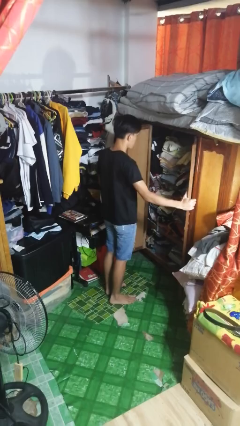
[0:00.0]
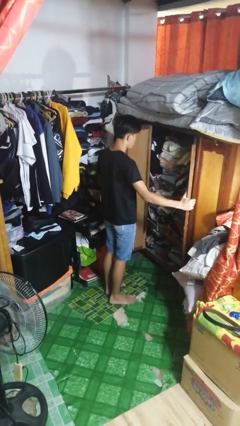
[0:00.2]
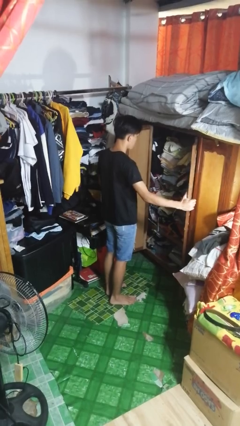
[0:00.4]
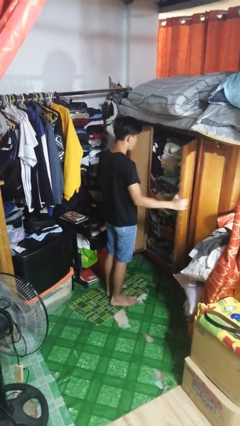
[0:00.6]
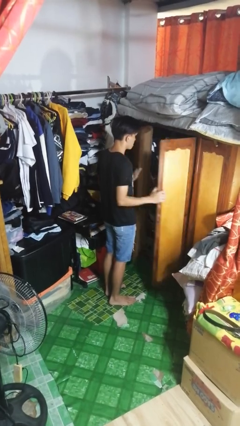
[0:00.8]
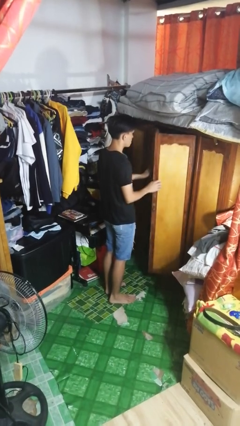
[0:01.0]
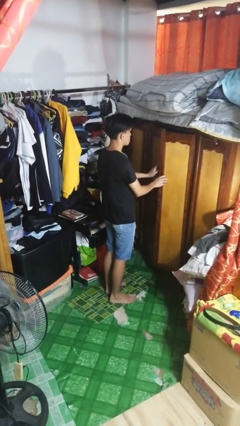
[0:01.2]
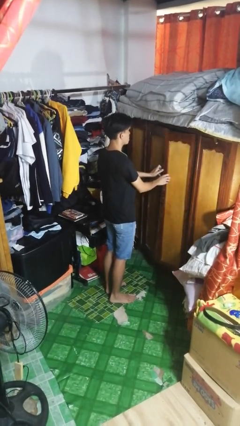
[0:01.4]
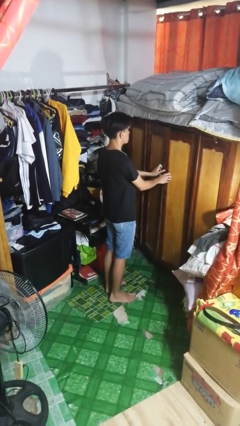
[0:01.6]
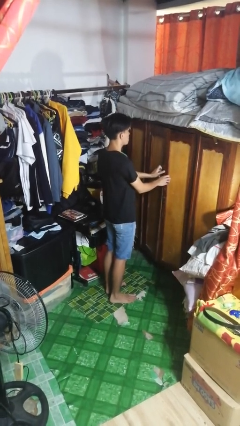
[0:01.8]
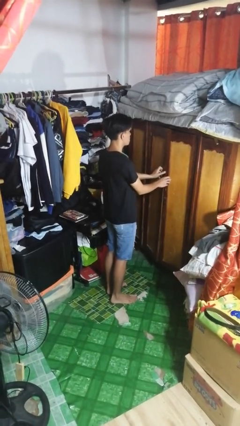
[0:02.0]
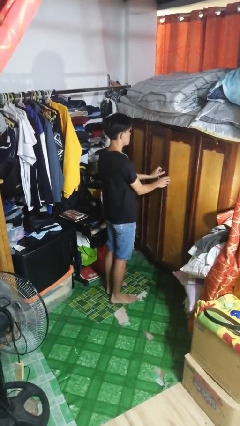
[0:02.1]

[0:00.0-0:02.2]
person closes closet door

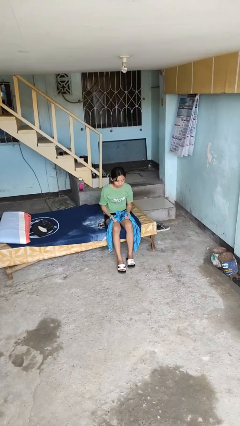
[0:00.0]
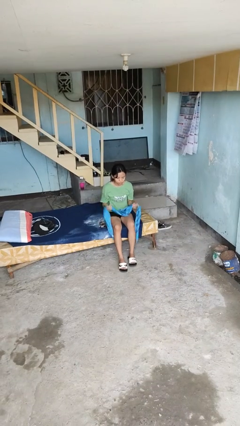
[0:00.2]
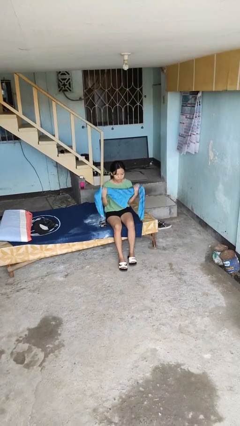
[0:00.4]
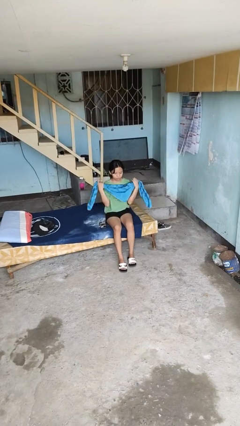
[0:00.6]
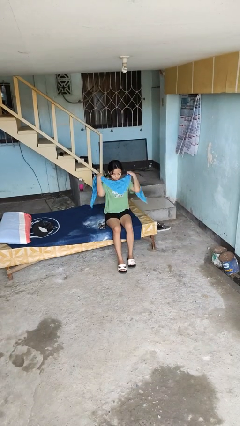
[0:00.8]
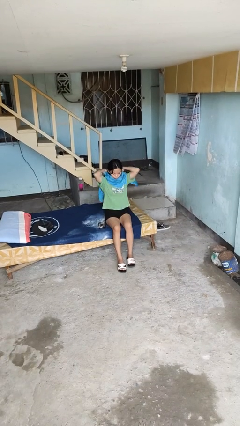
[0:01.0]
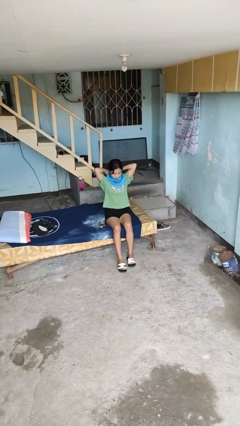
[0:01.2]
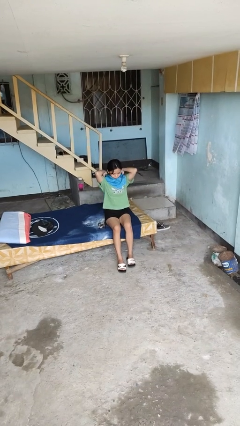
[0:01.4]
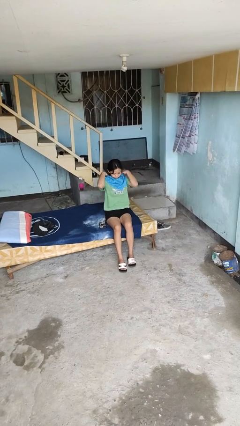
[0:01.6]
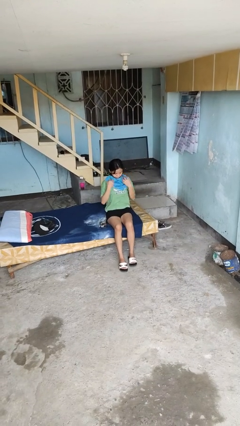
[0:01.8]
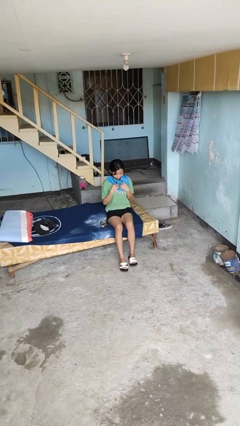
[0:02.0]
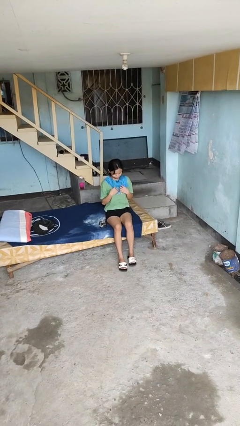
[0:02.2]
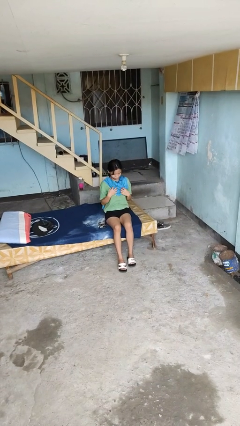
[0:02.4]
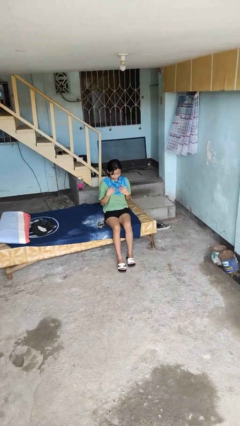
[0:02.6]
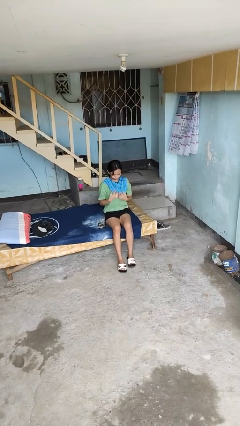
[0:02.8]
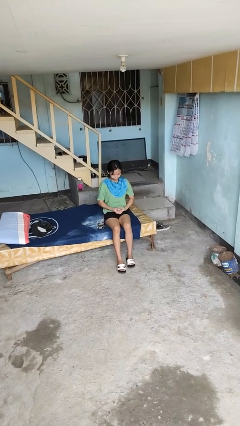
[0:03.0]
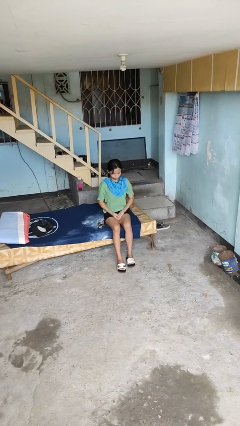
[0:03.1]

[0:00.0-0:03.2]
person puts on scarf

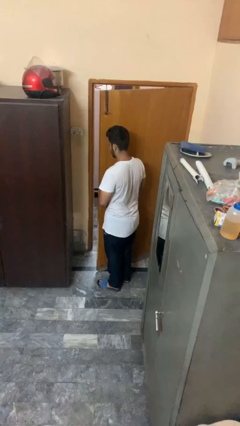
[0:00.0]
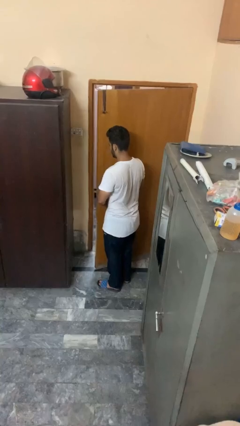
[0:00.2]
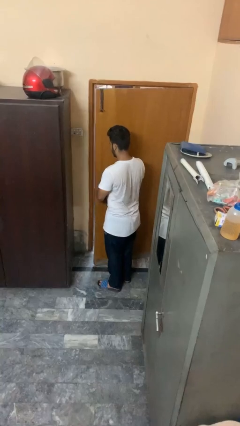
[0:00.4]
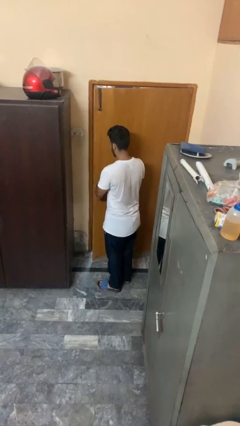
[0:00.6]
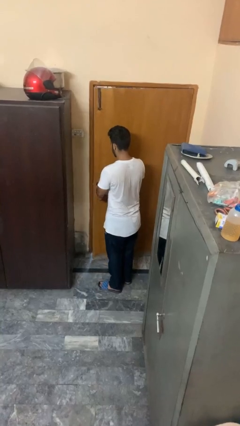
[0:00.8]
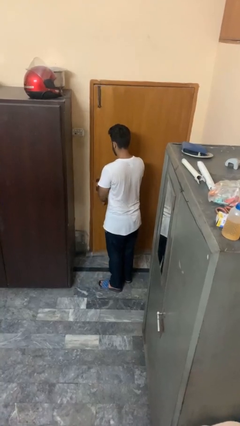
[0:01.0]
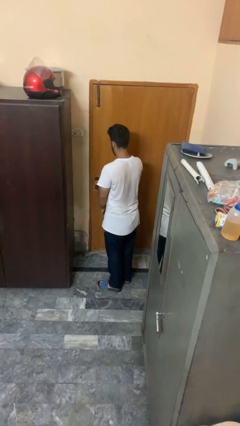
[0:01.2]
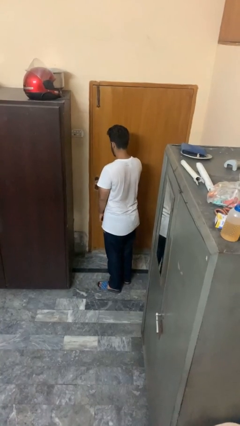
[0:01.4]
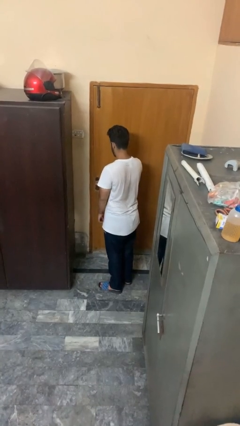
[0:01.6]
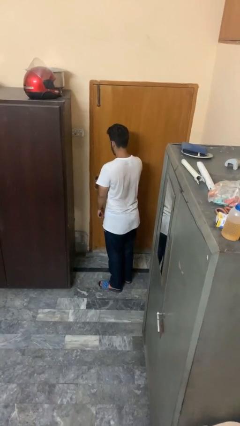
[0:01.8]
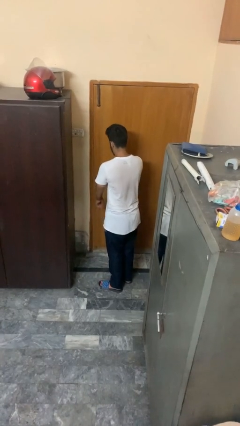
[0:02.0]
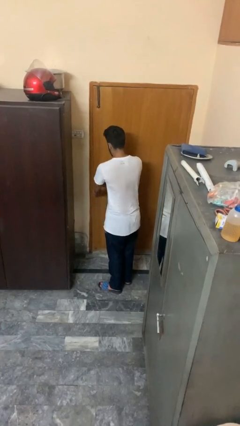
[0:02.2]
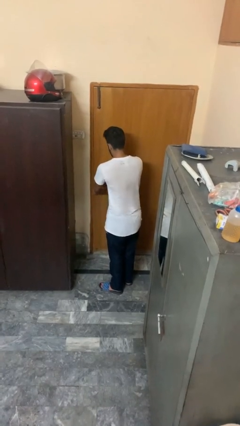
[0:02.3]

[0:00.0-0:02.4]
person closes facility door

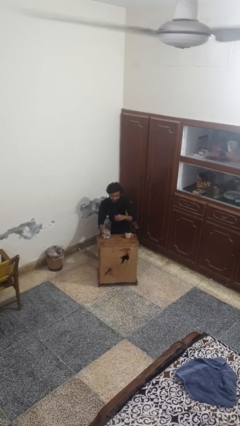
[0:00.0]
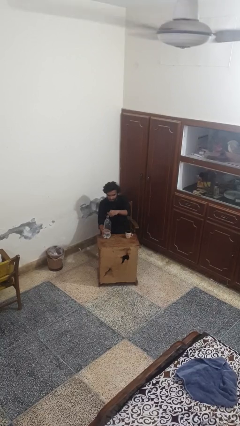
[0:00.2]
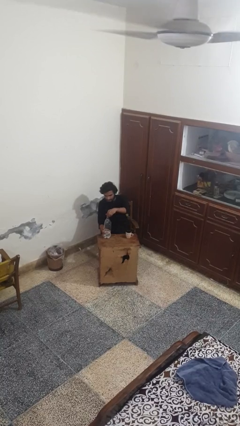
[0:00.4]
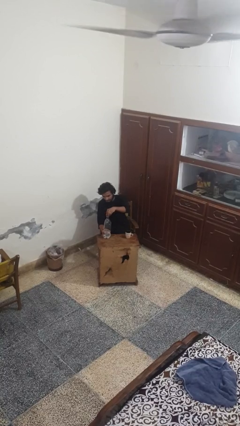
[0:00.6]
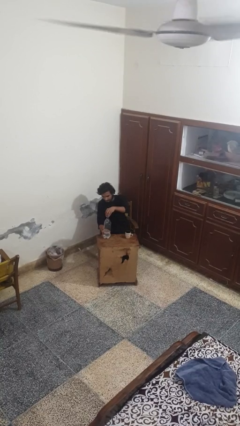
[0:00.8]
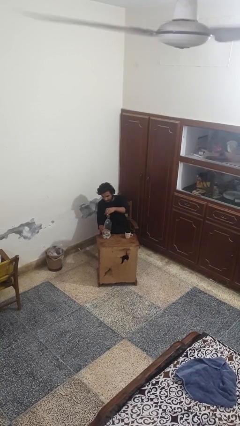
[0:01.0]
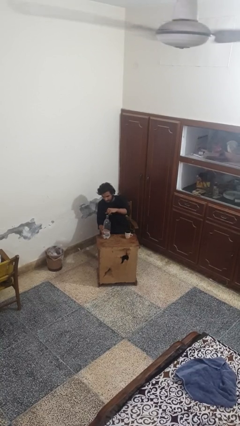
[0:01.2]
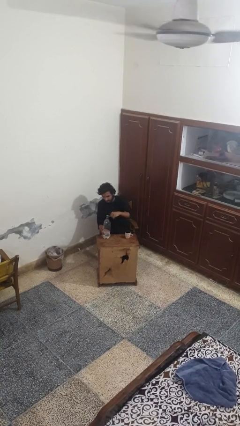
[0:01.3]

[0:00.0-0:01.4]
person screws lid to bottle

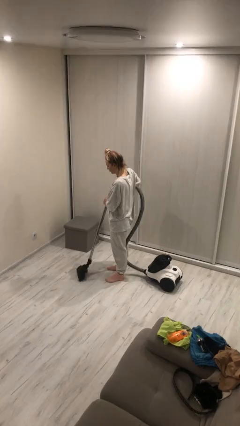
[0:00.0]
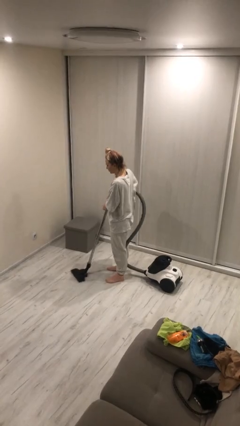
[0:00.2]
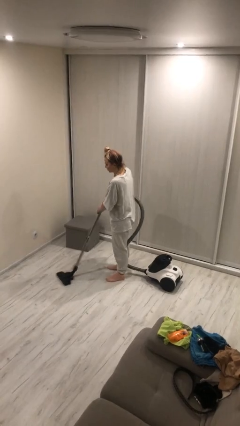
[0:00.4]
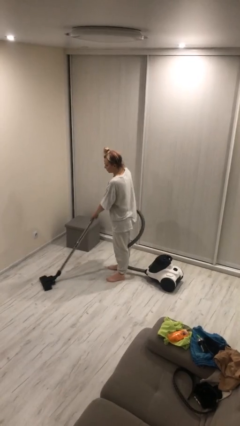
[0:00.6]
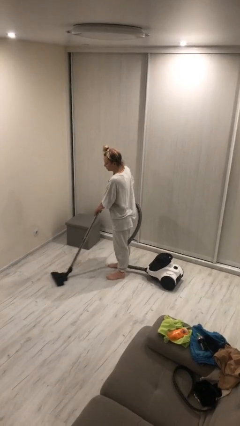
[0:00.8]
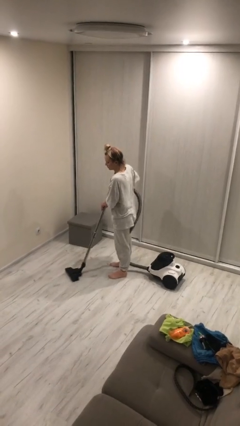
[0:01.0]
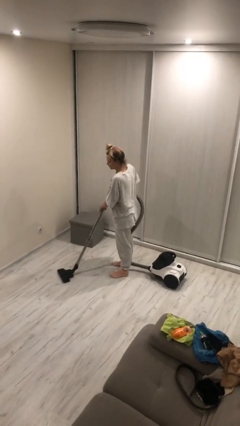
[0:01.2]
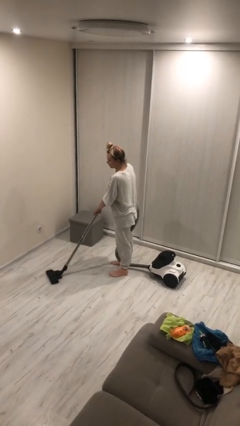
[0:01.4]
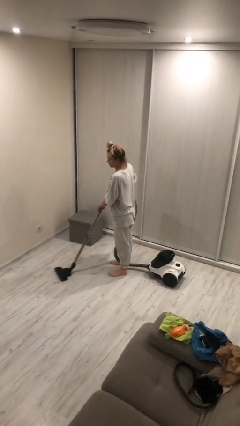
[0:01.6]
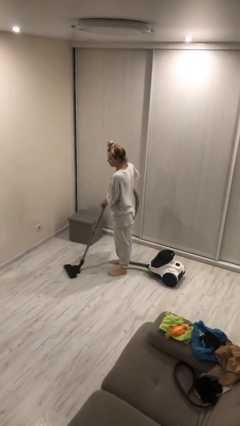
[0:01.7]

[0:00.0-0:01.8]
person vacuums carpet

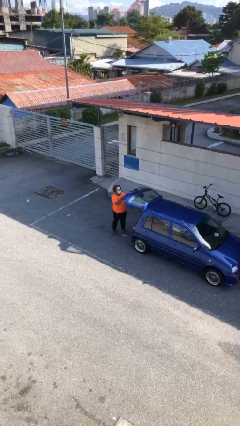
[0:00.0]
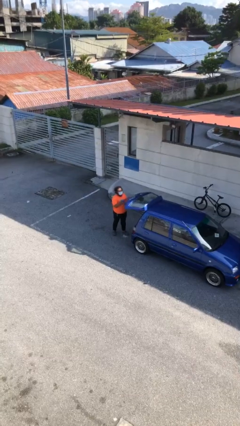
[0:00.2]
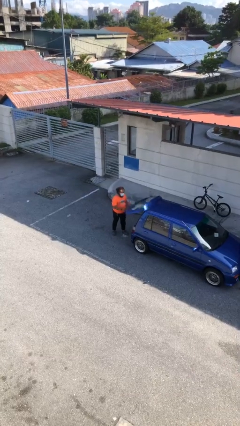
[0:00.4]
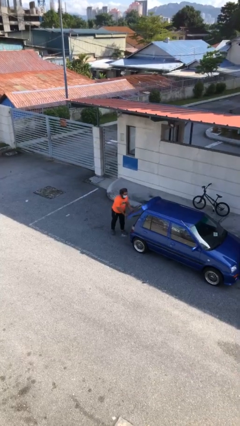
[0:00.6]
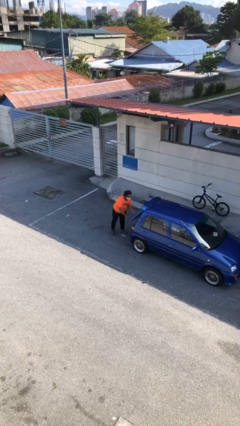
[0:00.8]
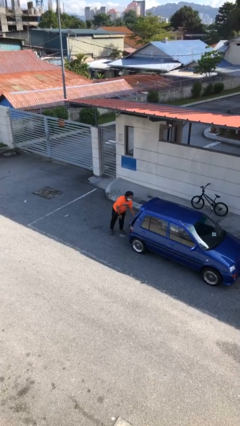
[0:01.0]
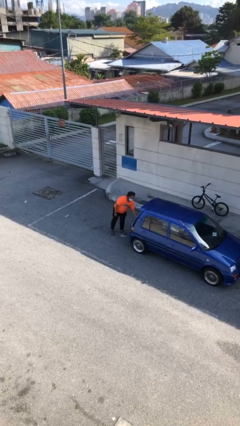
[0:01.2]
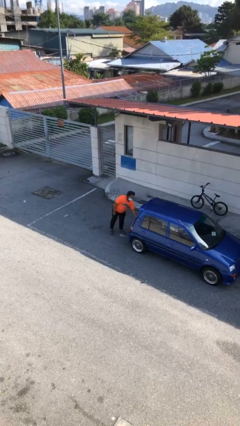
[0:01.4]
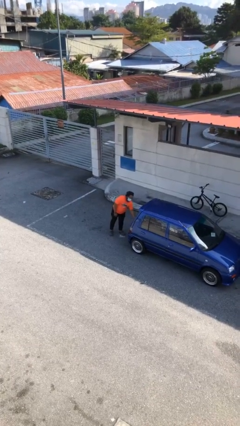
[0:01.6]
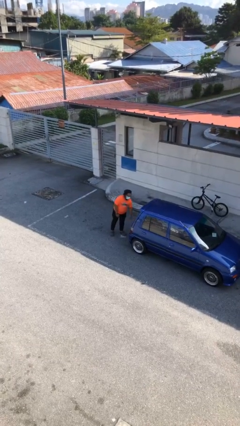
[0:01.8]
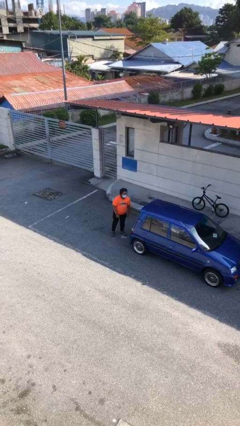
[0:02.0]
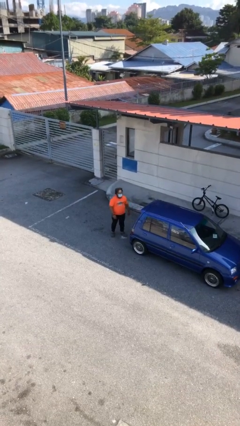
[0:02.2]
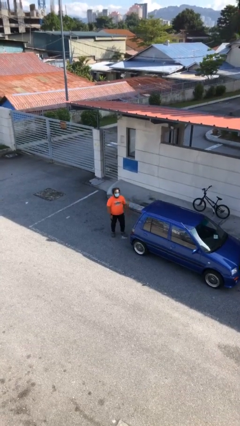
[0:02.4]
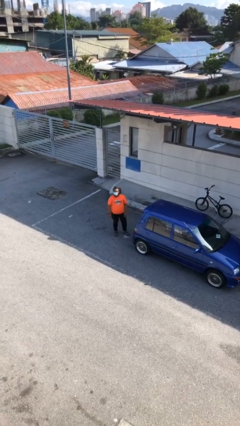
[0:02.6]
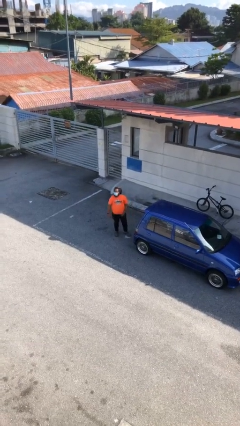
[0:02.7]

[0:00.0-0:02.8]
person closes car trunk

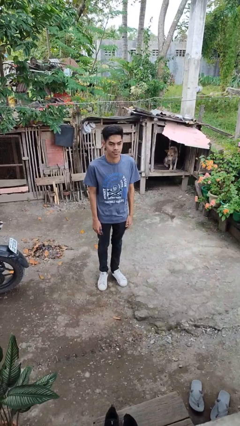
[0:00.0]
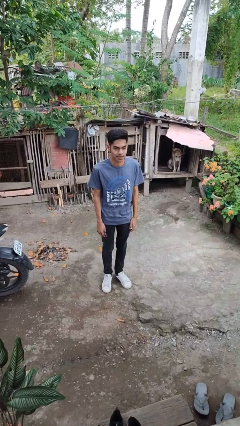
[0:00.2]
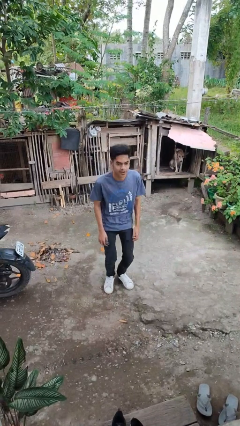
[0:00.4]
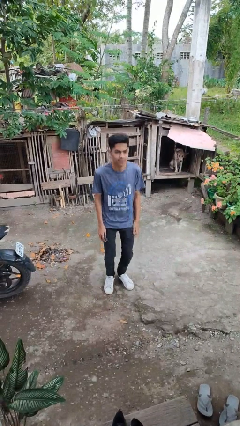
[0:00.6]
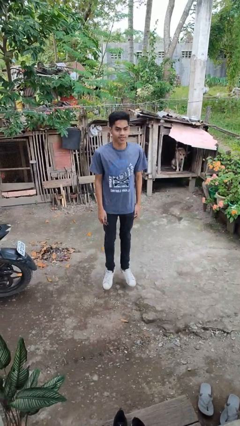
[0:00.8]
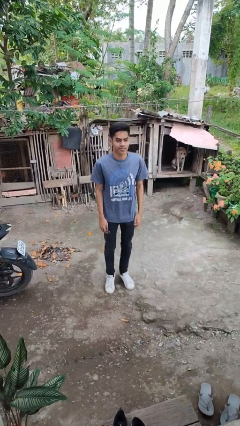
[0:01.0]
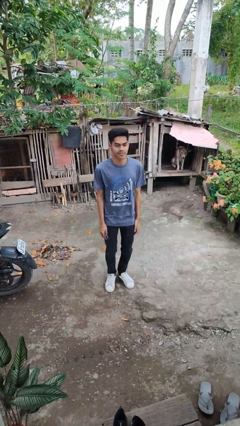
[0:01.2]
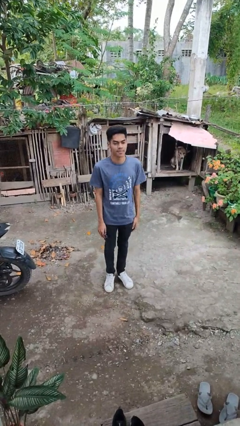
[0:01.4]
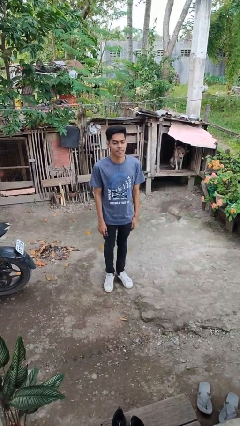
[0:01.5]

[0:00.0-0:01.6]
person jumps

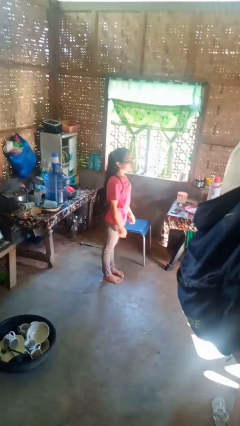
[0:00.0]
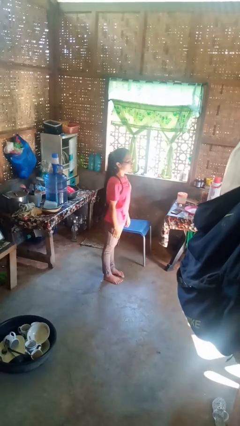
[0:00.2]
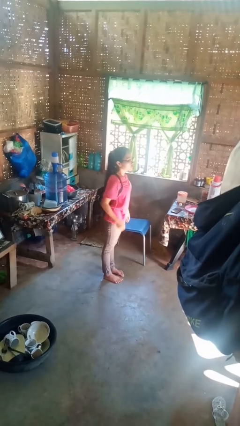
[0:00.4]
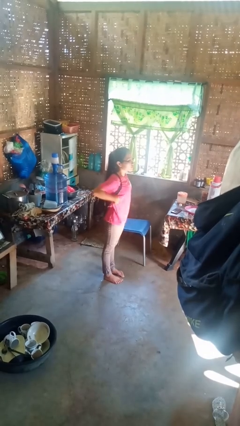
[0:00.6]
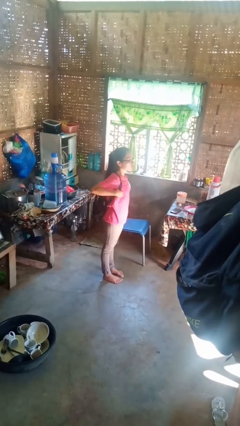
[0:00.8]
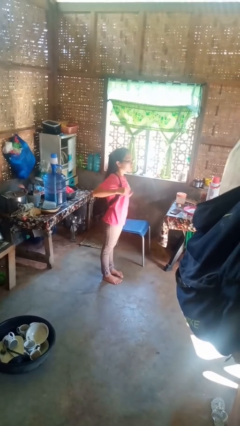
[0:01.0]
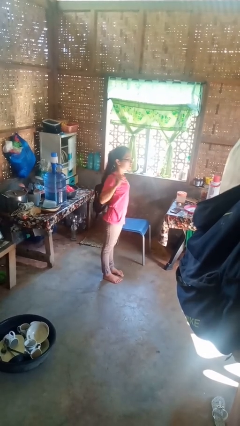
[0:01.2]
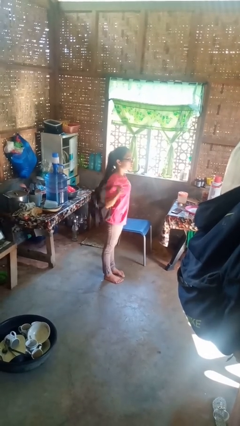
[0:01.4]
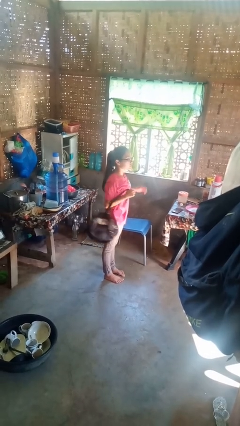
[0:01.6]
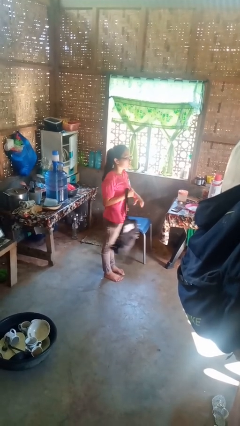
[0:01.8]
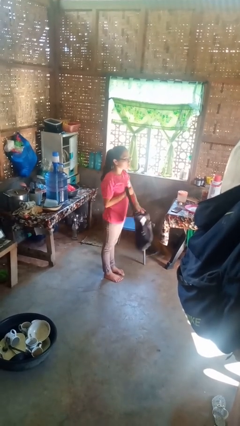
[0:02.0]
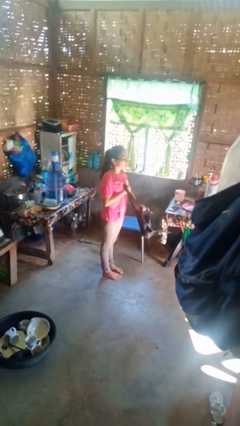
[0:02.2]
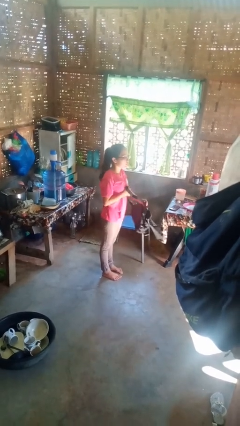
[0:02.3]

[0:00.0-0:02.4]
person takes off backpack
